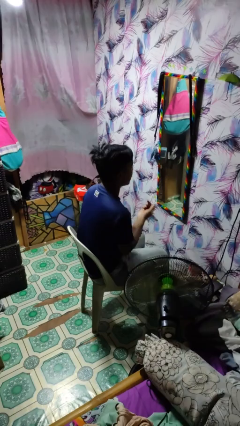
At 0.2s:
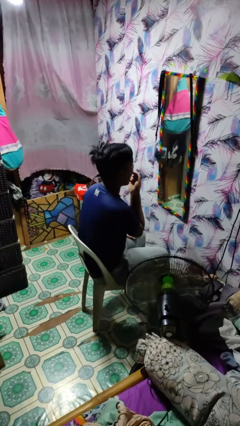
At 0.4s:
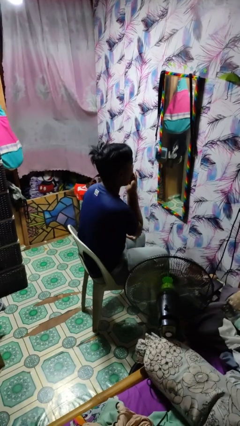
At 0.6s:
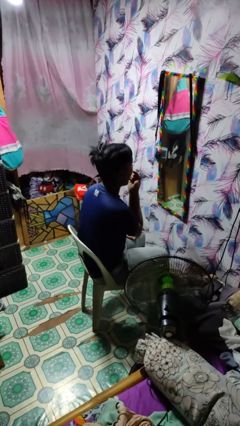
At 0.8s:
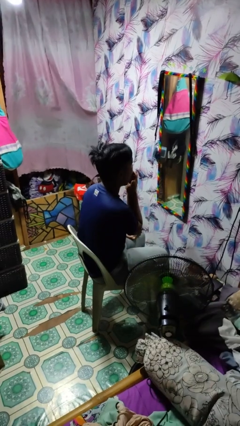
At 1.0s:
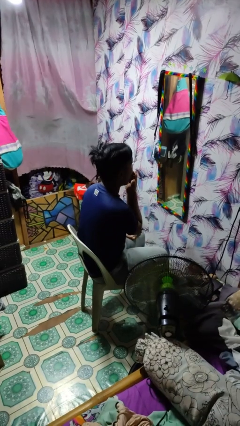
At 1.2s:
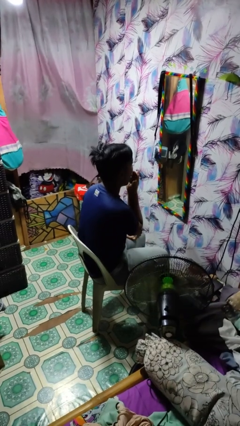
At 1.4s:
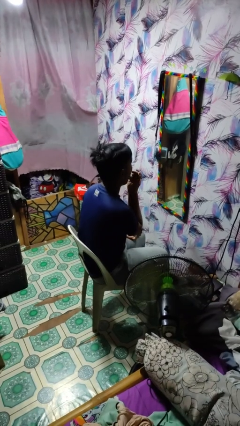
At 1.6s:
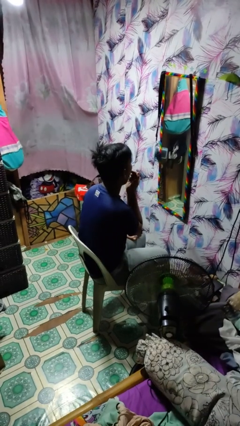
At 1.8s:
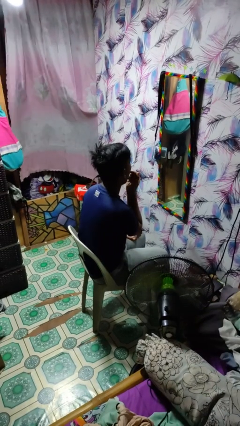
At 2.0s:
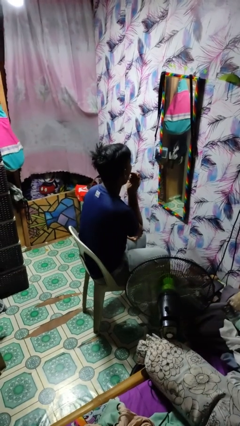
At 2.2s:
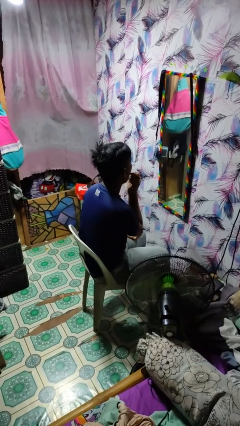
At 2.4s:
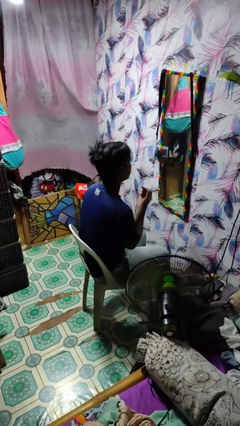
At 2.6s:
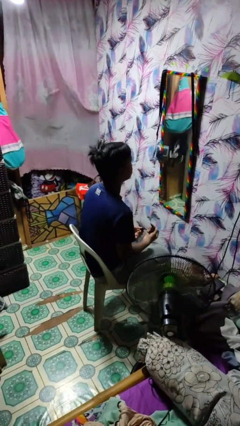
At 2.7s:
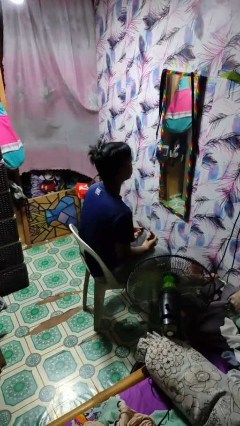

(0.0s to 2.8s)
person applies lip makeup

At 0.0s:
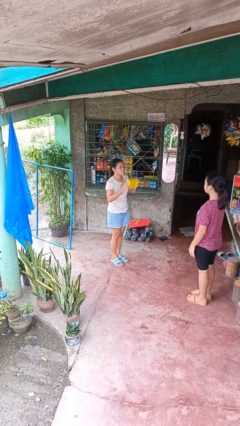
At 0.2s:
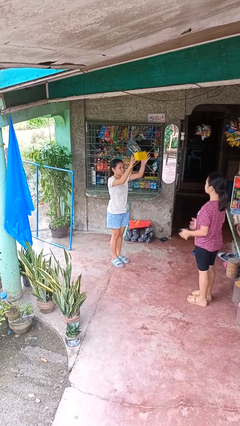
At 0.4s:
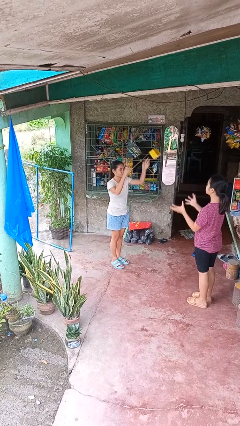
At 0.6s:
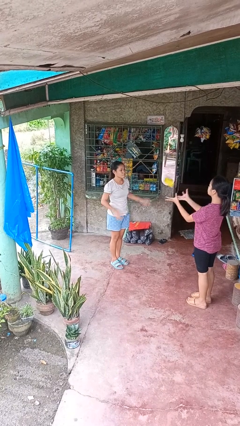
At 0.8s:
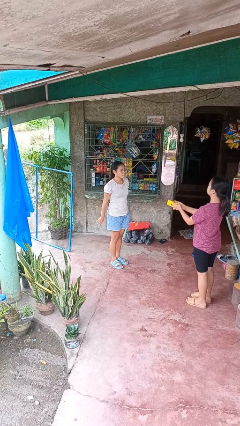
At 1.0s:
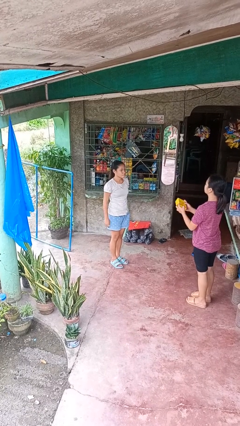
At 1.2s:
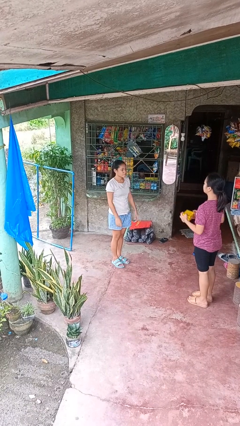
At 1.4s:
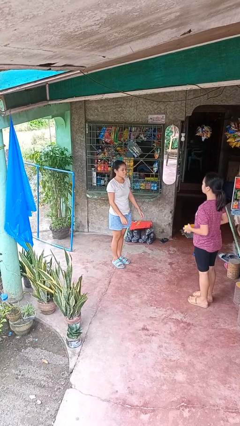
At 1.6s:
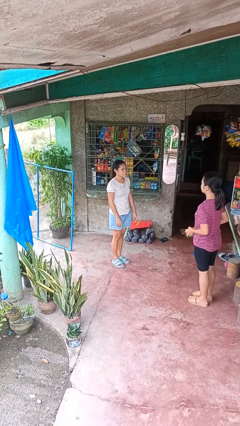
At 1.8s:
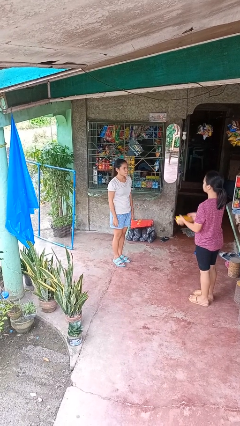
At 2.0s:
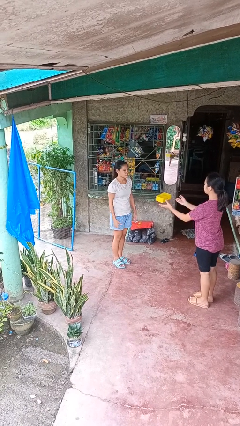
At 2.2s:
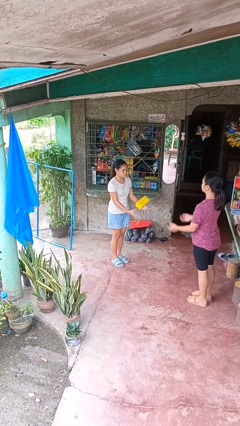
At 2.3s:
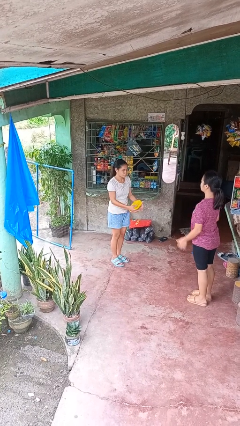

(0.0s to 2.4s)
person throws object to person

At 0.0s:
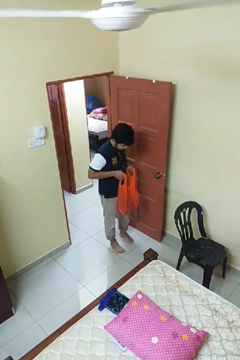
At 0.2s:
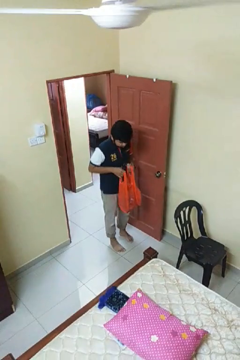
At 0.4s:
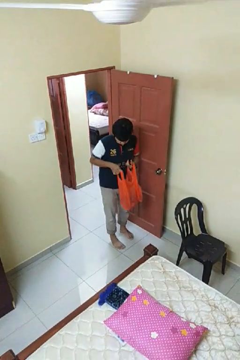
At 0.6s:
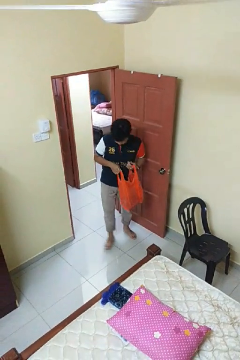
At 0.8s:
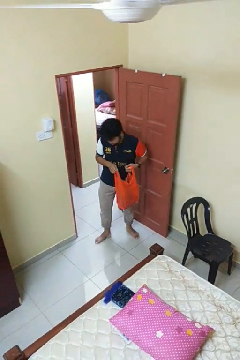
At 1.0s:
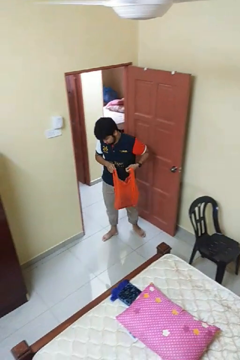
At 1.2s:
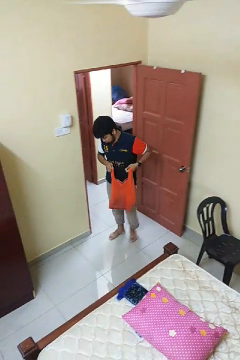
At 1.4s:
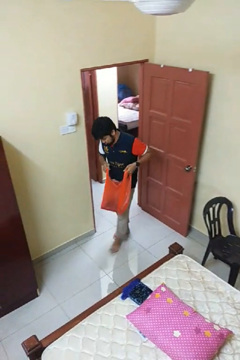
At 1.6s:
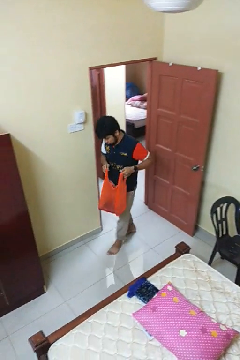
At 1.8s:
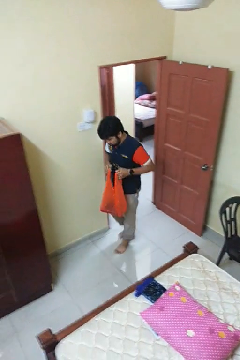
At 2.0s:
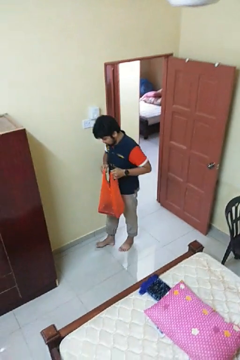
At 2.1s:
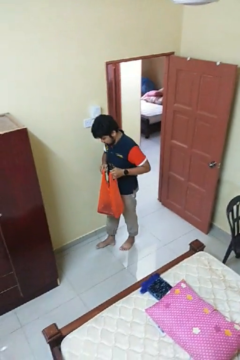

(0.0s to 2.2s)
person carries groceries

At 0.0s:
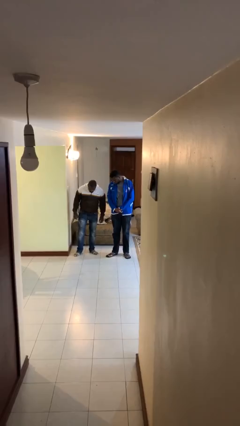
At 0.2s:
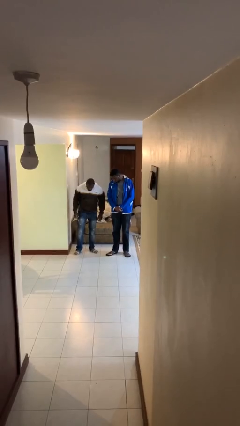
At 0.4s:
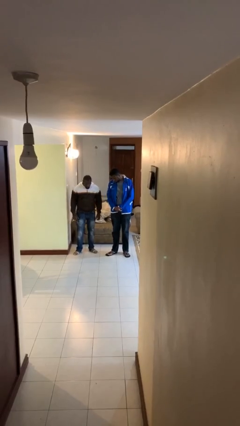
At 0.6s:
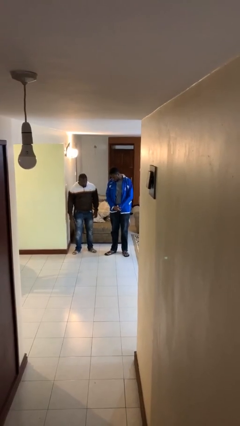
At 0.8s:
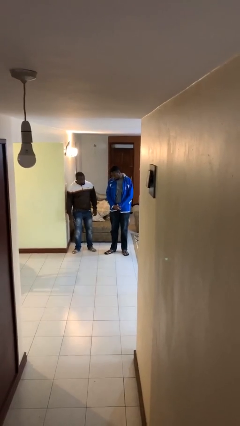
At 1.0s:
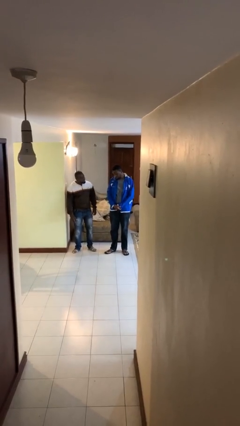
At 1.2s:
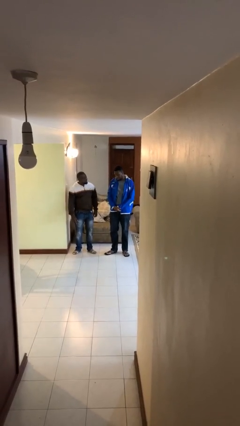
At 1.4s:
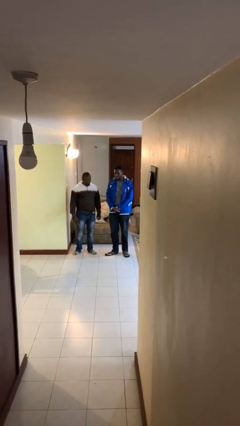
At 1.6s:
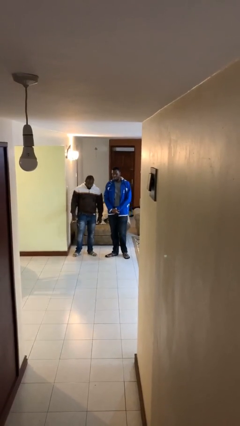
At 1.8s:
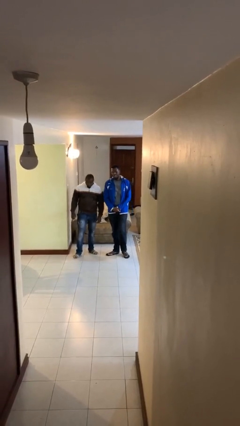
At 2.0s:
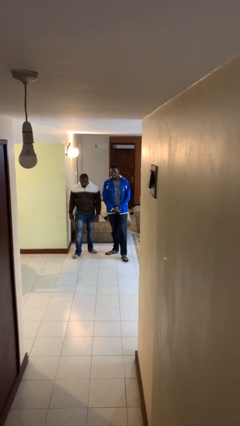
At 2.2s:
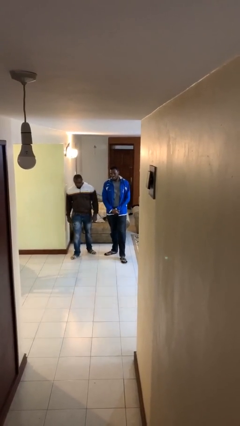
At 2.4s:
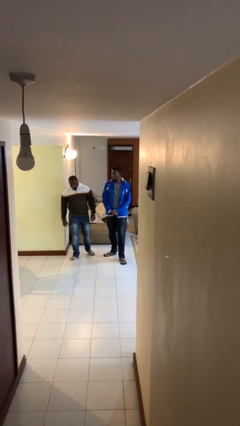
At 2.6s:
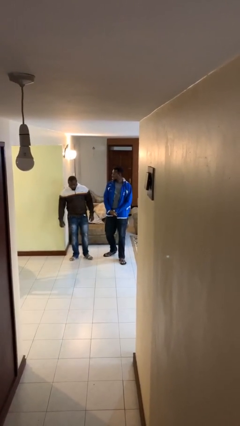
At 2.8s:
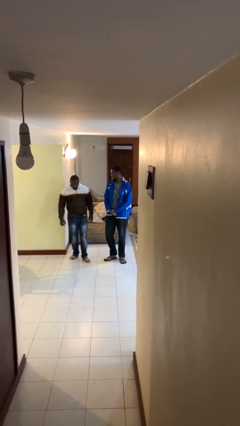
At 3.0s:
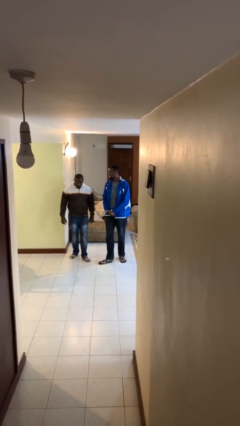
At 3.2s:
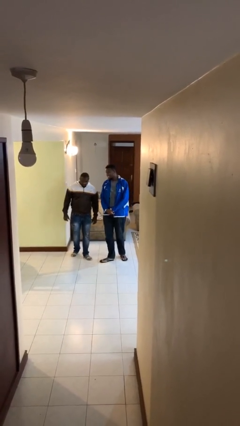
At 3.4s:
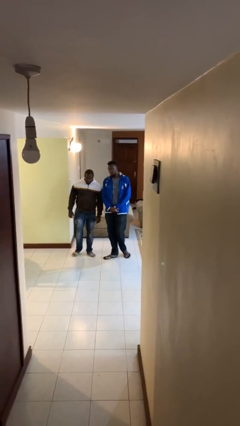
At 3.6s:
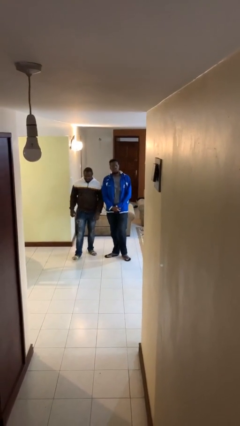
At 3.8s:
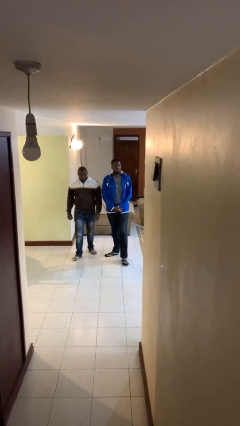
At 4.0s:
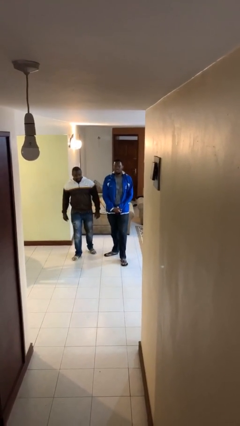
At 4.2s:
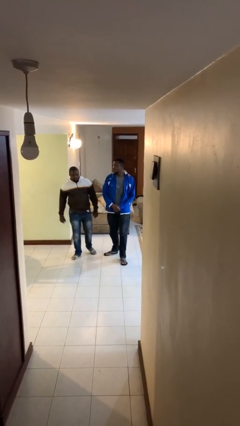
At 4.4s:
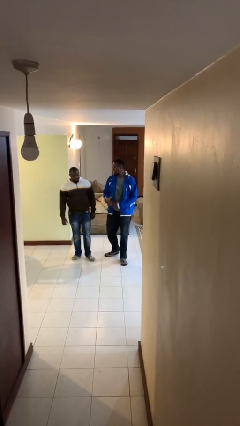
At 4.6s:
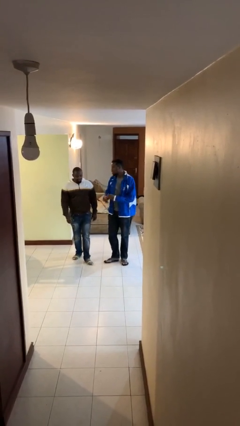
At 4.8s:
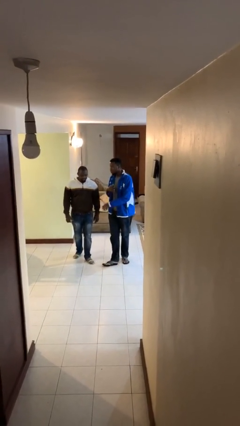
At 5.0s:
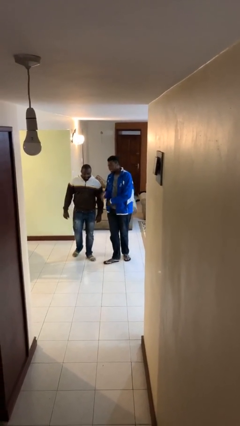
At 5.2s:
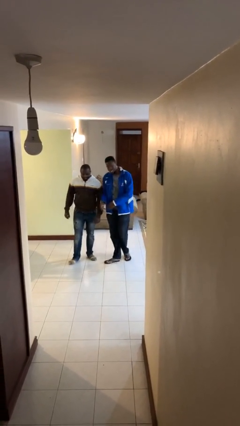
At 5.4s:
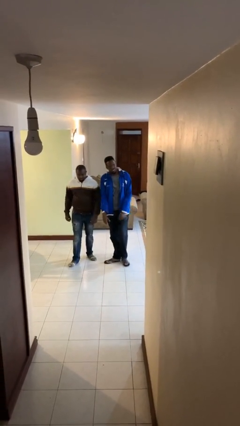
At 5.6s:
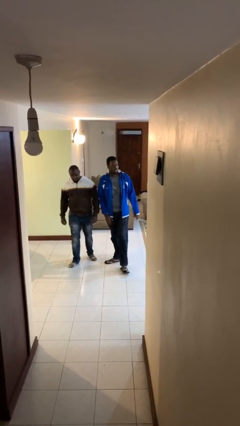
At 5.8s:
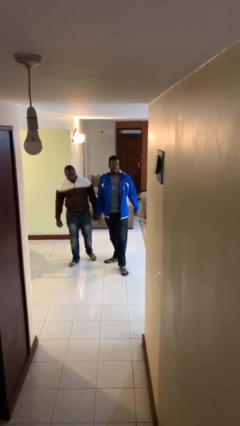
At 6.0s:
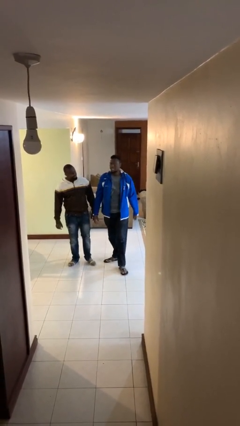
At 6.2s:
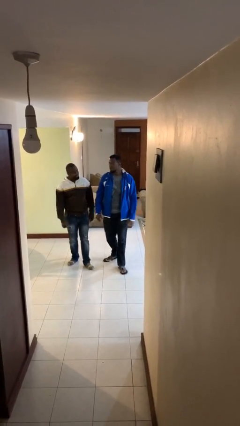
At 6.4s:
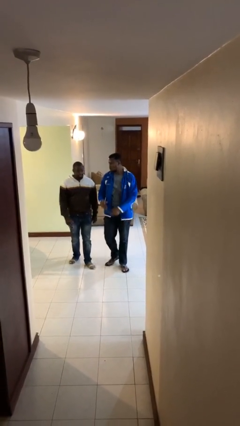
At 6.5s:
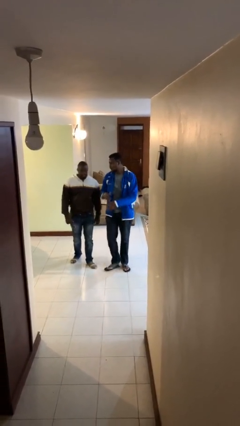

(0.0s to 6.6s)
person talks to person

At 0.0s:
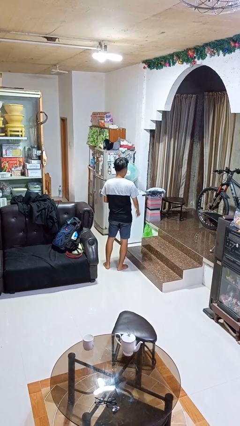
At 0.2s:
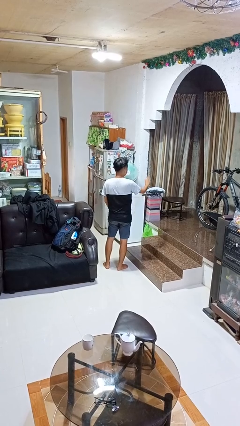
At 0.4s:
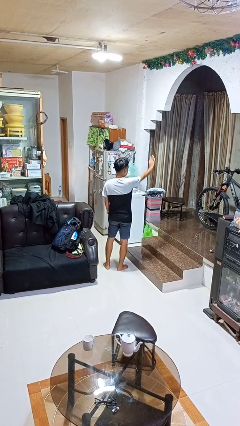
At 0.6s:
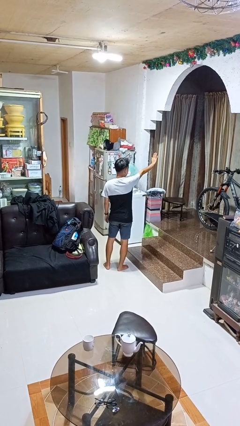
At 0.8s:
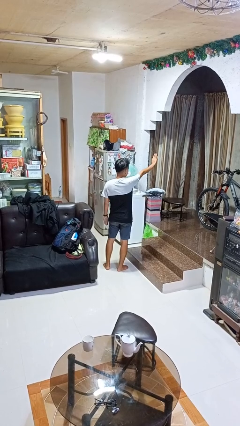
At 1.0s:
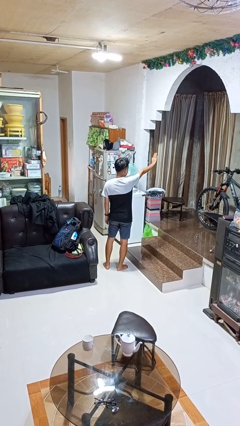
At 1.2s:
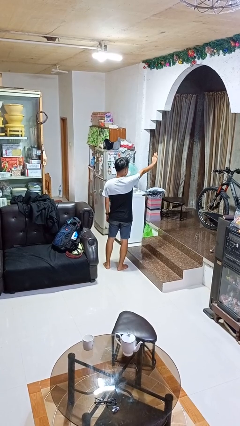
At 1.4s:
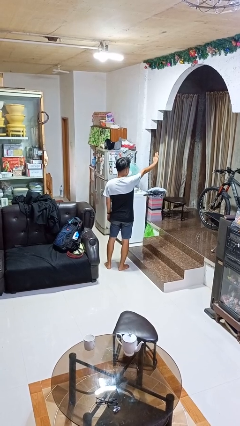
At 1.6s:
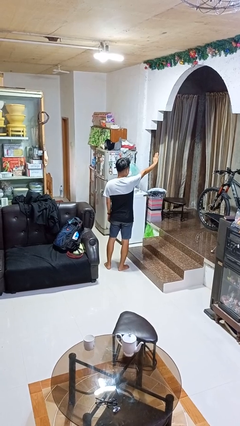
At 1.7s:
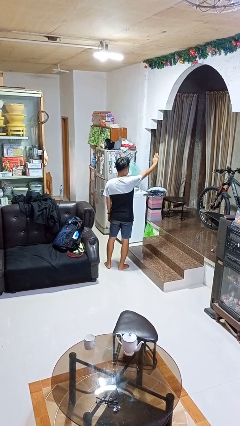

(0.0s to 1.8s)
person gestures stop

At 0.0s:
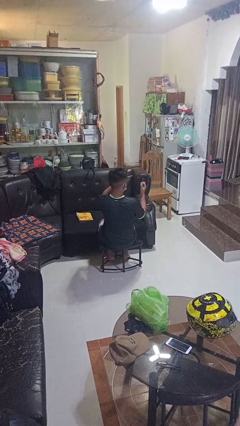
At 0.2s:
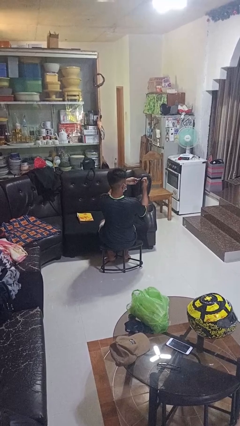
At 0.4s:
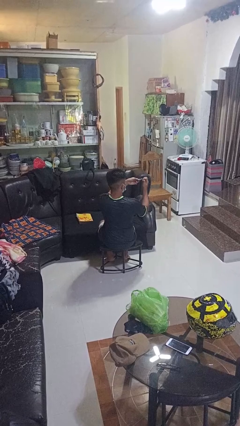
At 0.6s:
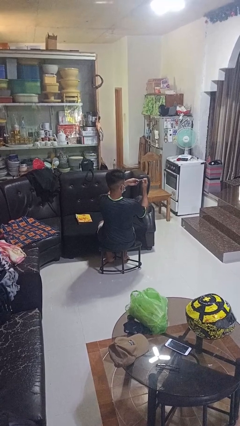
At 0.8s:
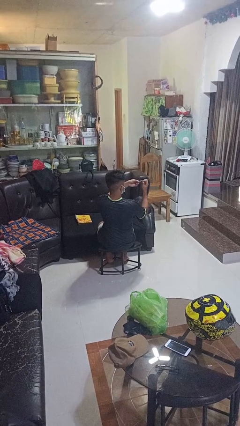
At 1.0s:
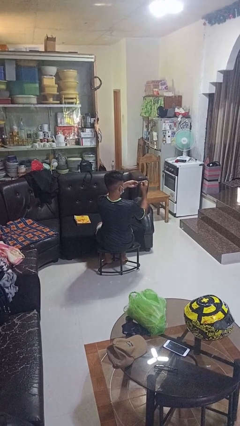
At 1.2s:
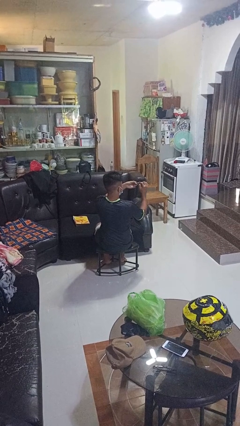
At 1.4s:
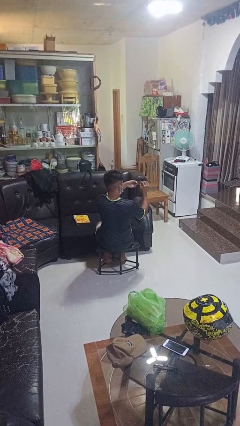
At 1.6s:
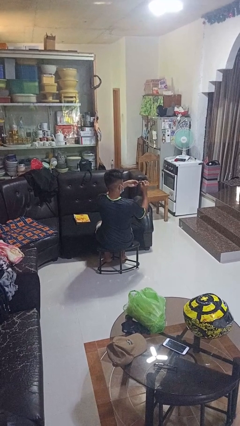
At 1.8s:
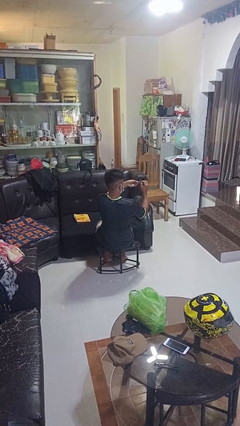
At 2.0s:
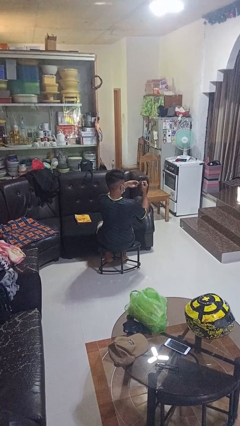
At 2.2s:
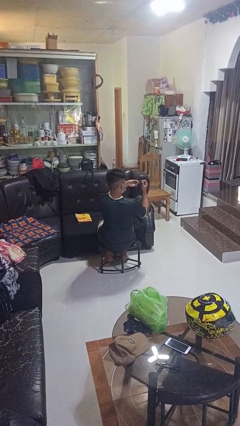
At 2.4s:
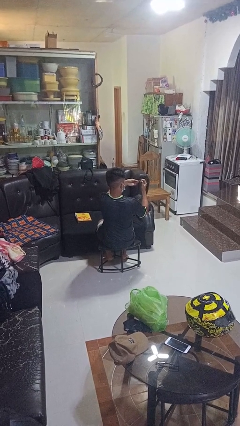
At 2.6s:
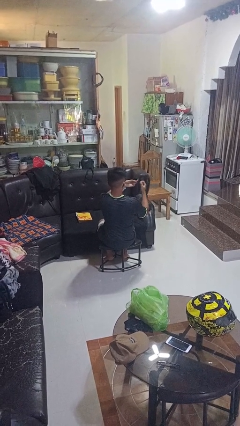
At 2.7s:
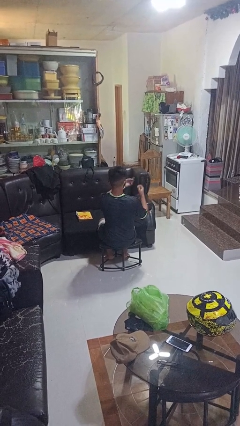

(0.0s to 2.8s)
person clips fingernails
